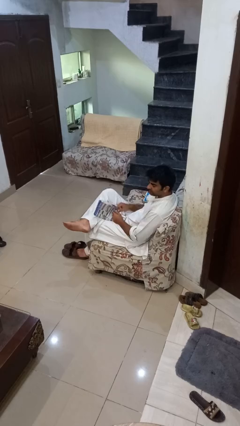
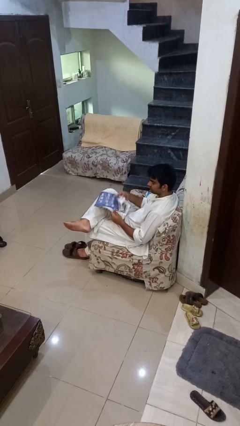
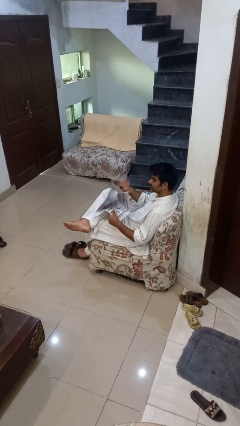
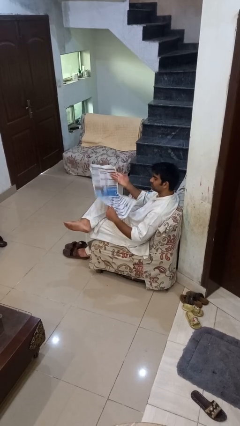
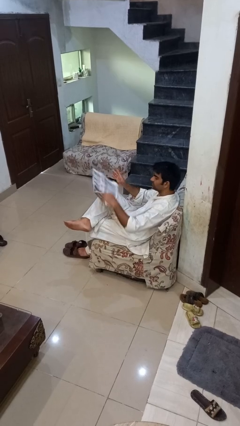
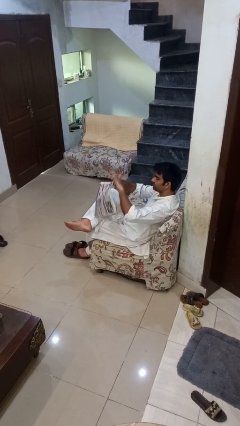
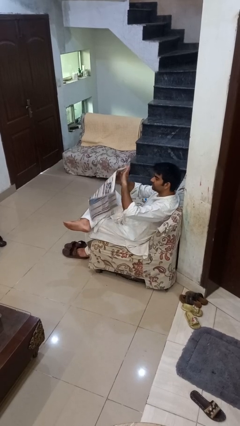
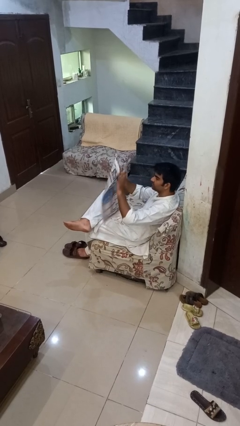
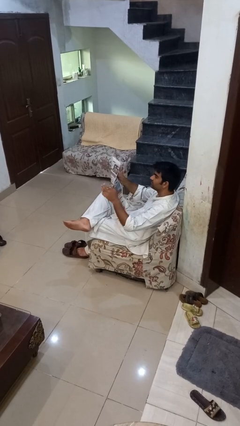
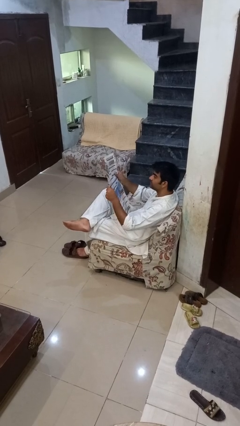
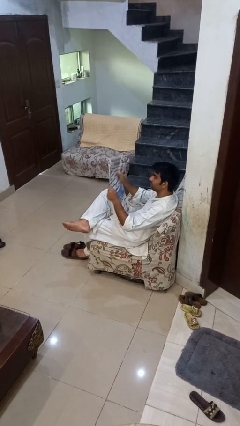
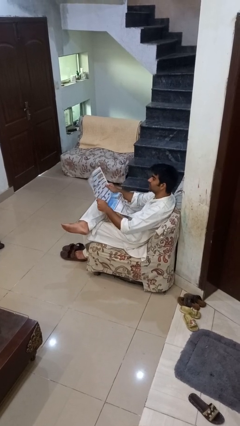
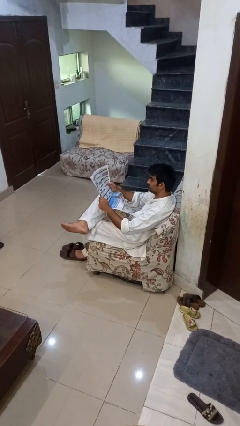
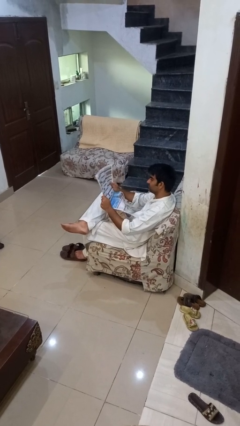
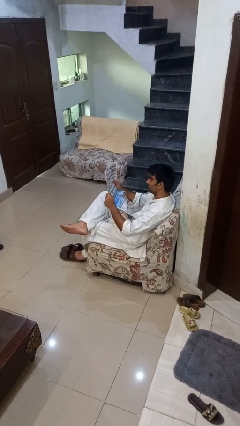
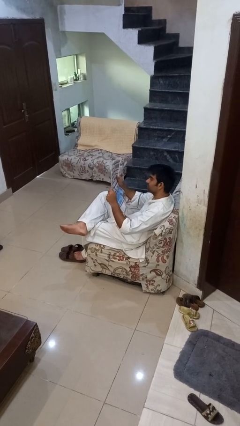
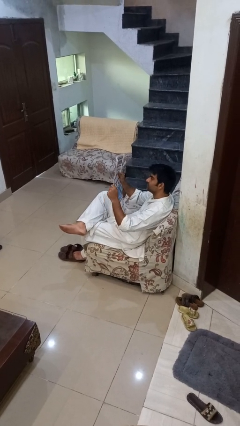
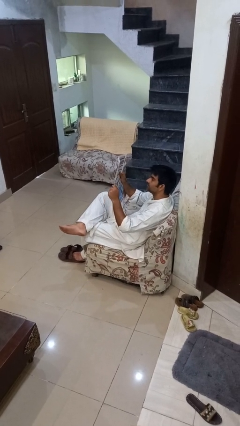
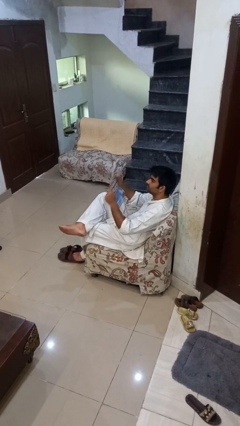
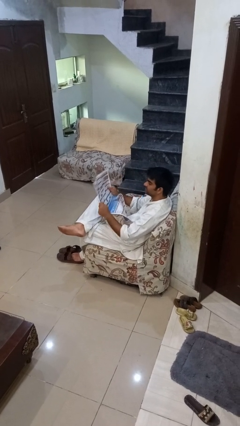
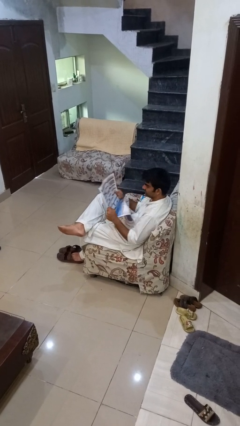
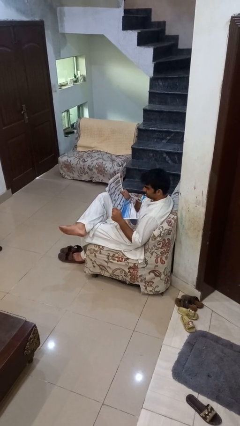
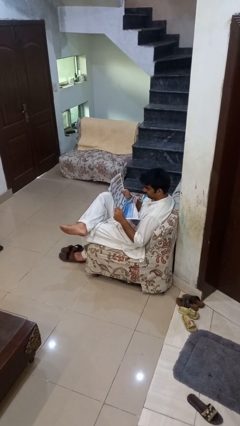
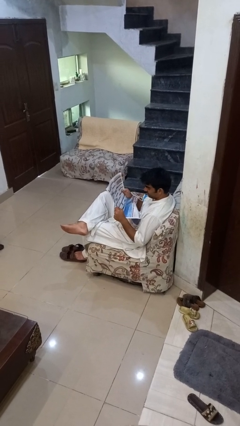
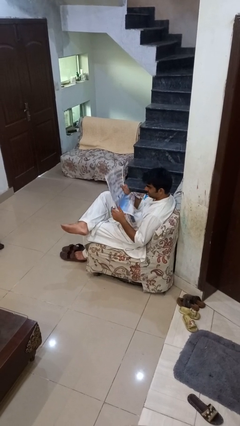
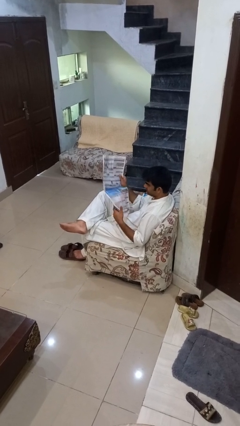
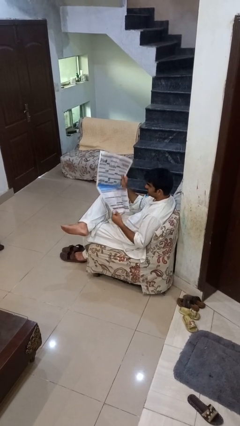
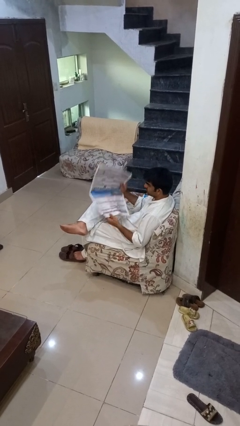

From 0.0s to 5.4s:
person reads newspaper

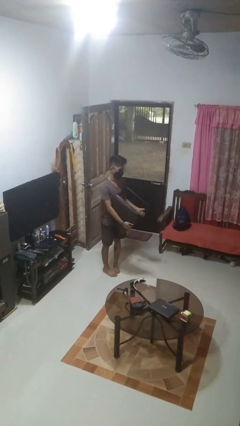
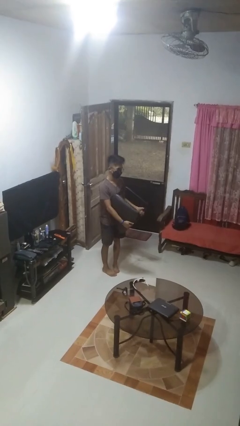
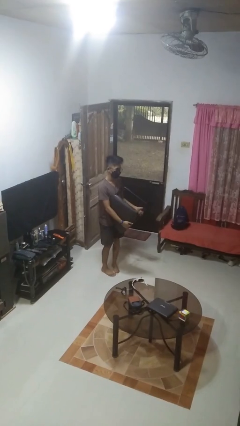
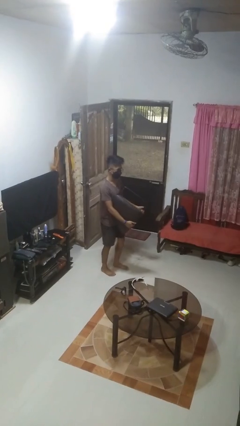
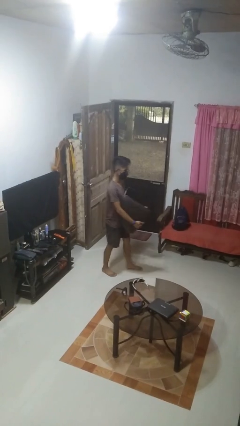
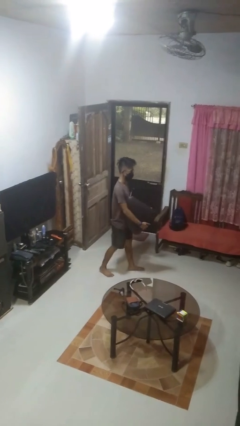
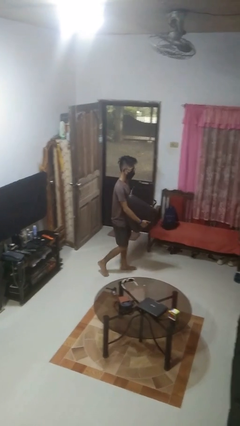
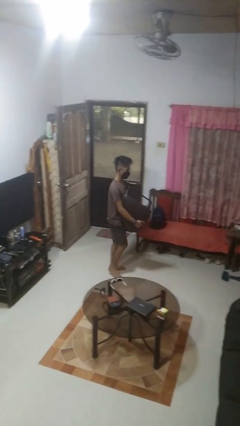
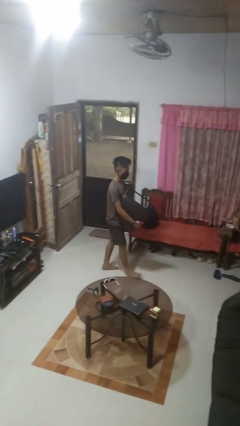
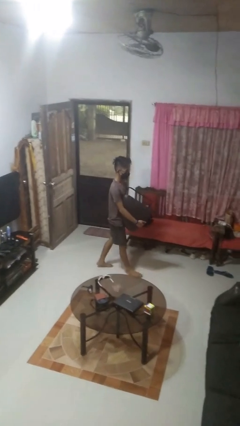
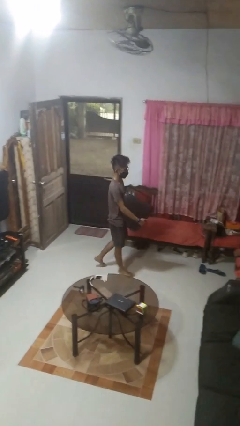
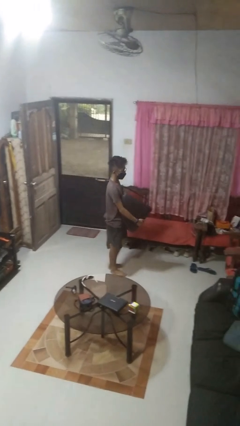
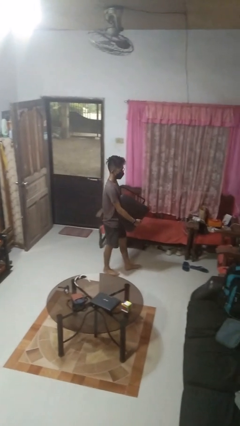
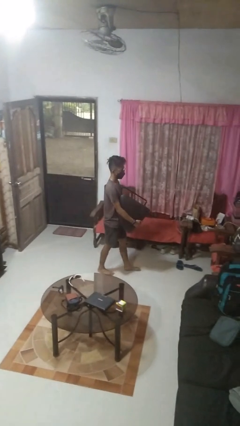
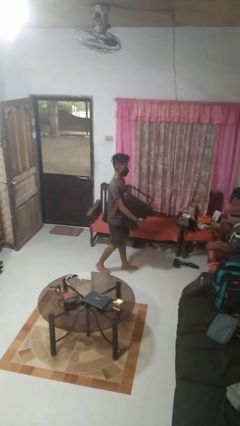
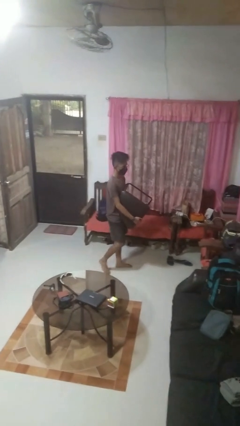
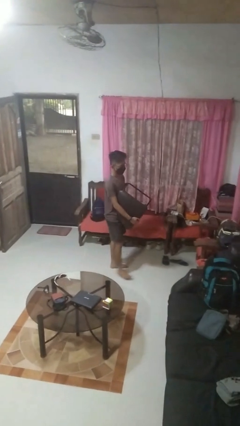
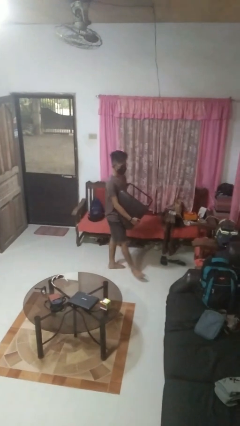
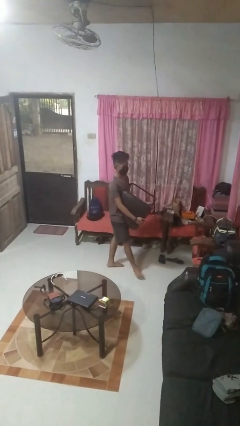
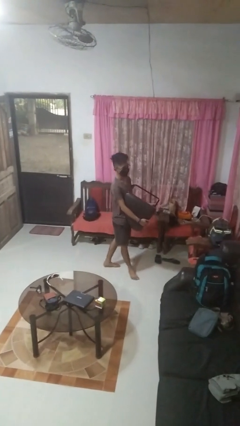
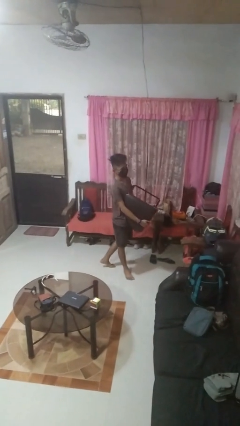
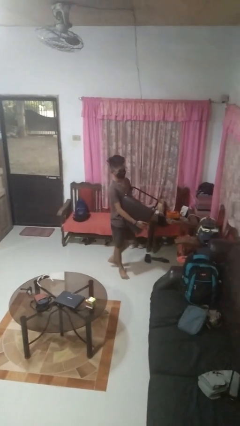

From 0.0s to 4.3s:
person carries furniture

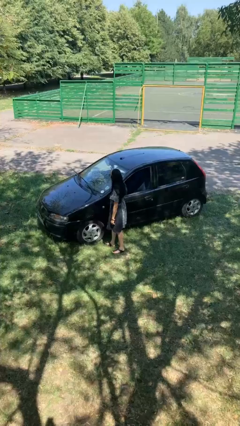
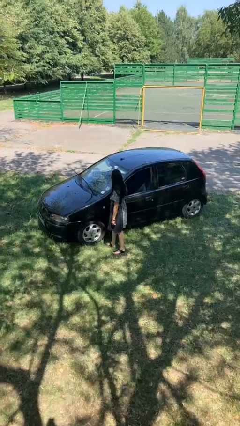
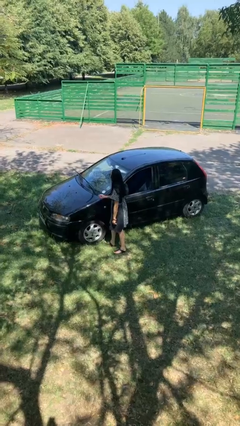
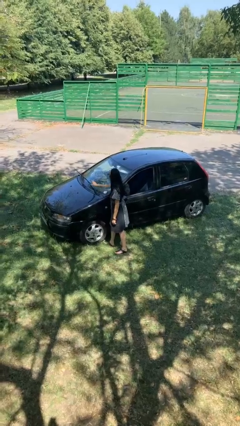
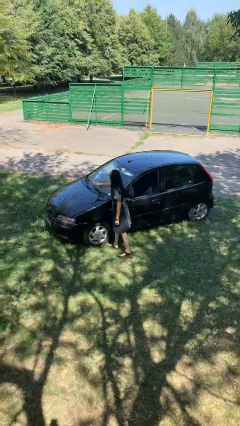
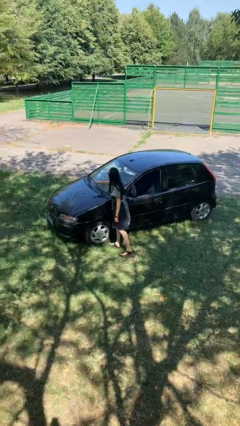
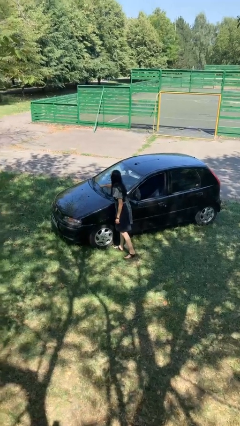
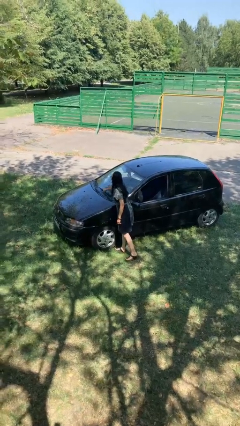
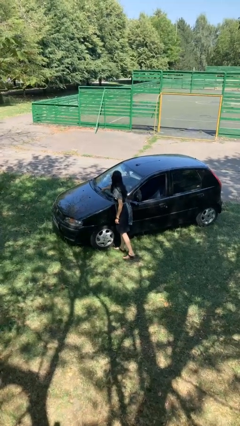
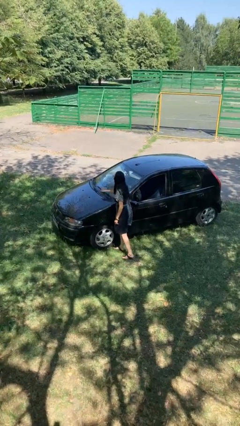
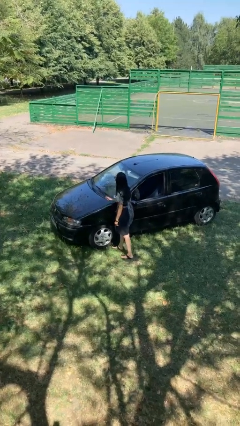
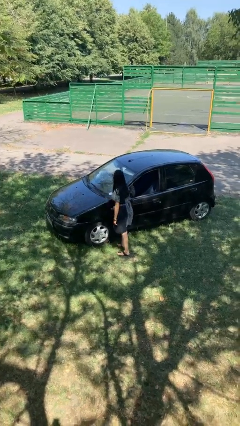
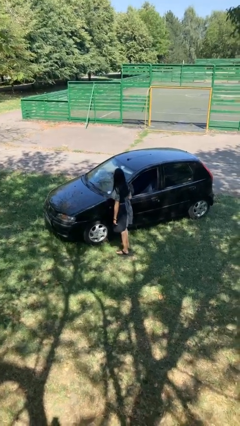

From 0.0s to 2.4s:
person flips down car wipers

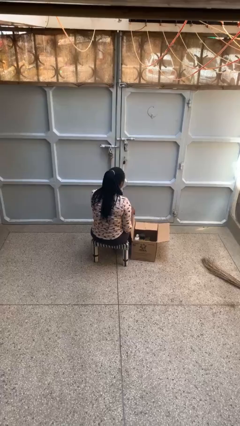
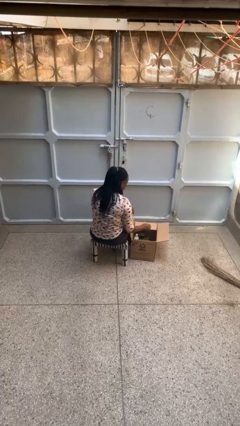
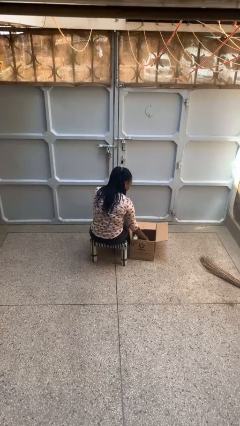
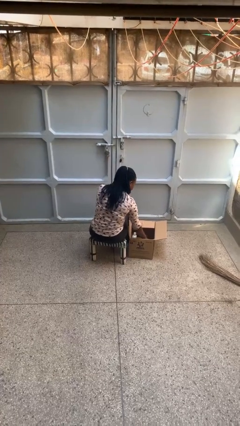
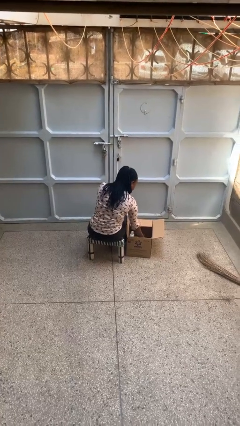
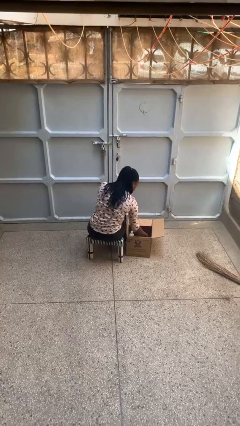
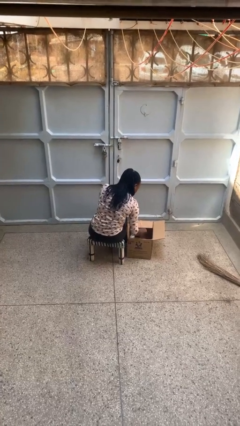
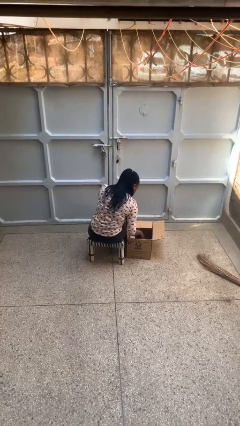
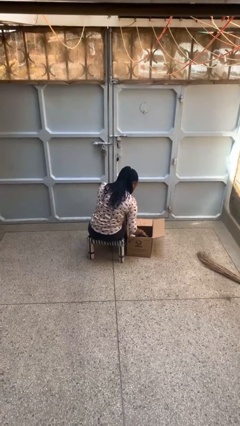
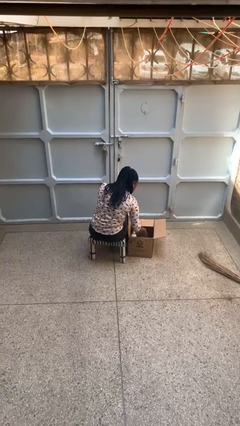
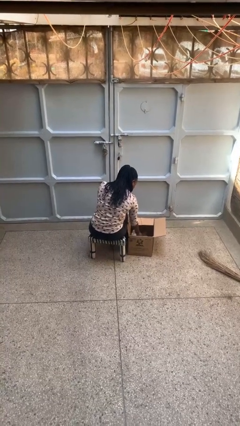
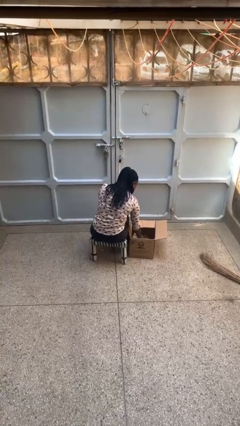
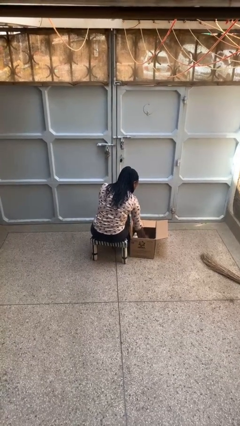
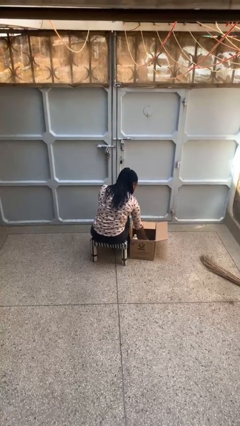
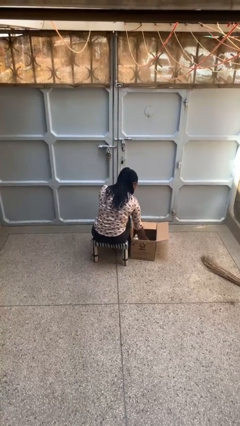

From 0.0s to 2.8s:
person searches in box

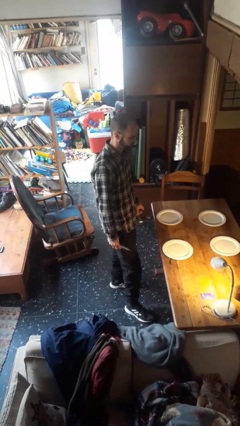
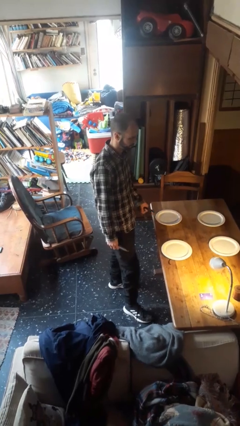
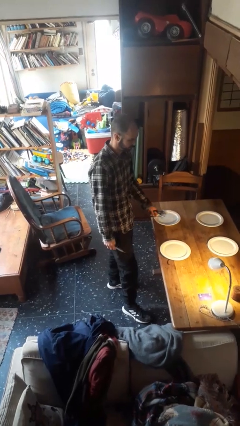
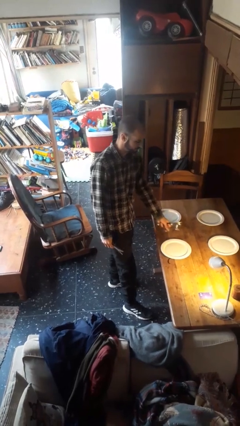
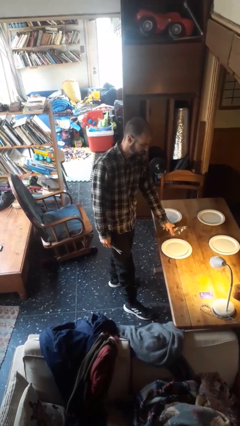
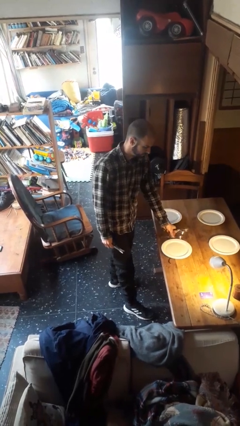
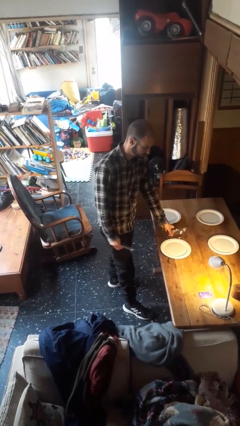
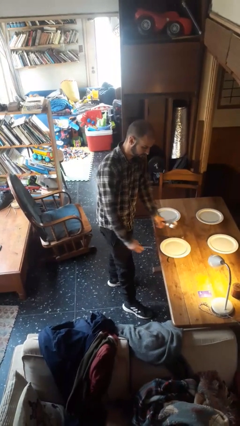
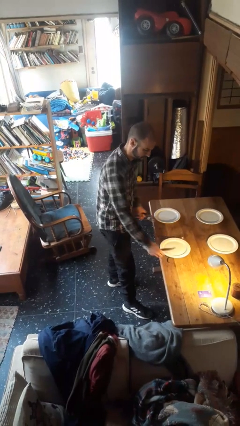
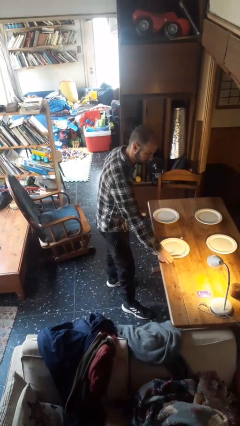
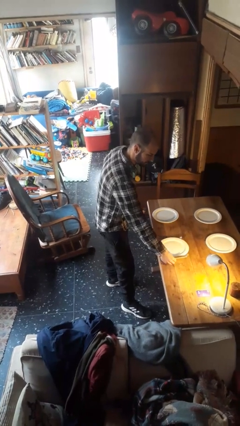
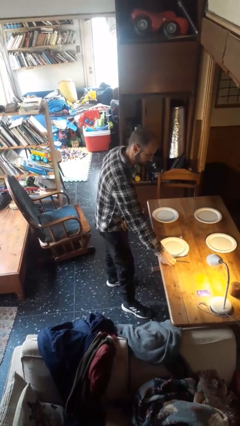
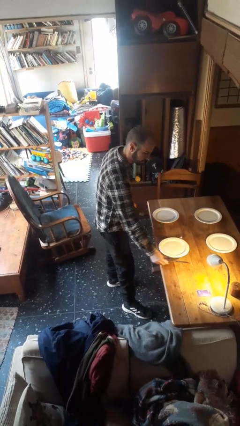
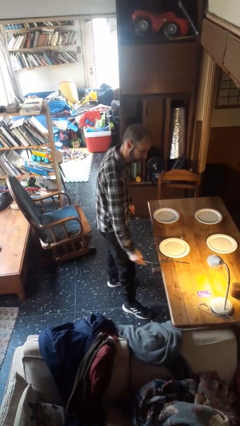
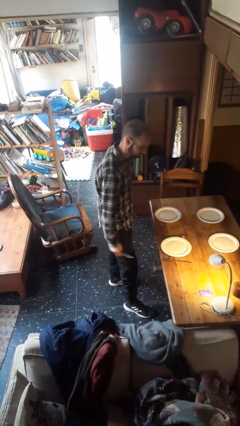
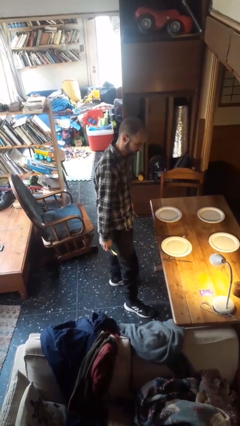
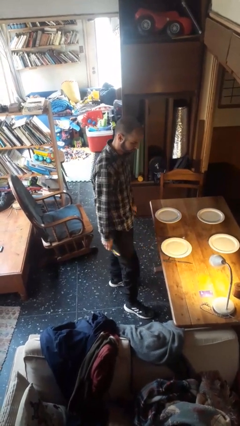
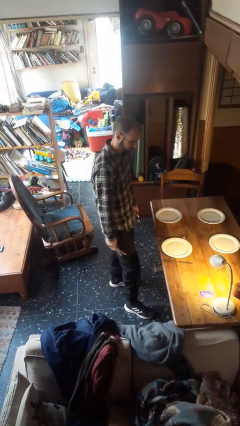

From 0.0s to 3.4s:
person sets table
